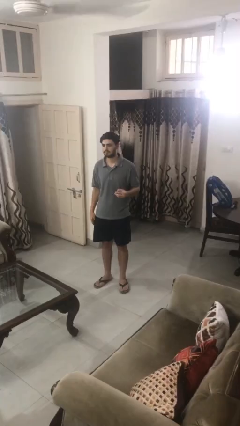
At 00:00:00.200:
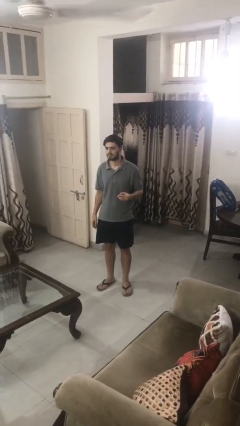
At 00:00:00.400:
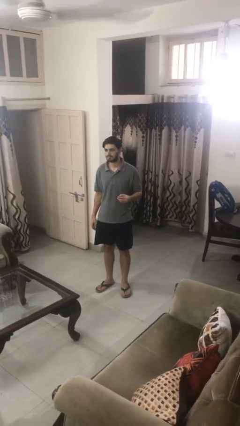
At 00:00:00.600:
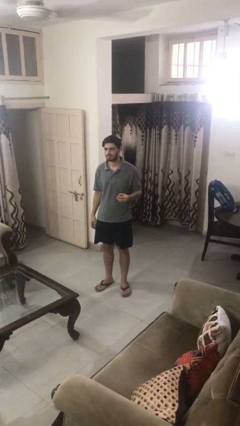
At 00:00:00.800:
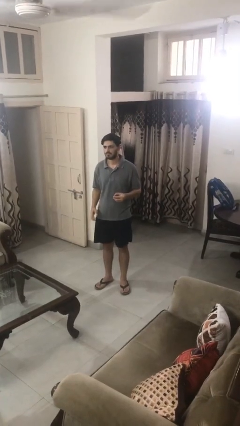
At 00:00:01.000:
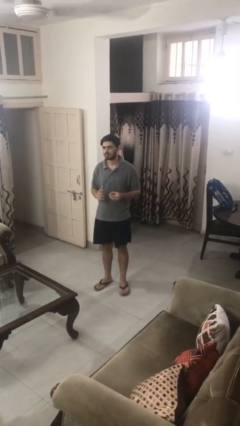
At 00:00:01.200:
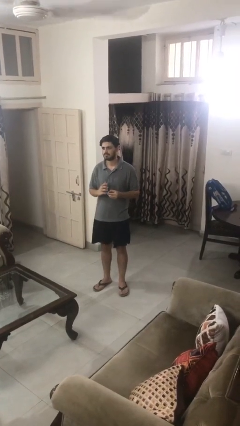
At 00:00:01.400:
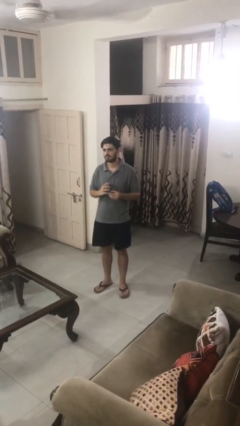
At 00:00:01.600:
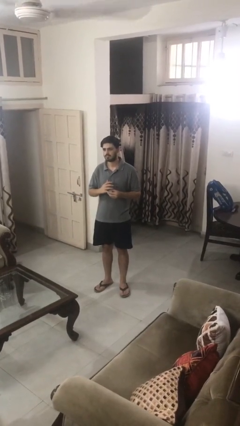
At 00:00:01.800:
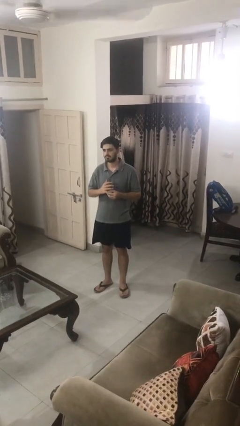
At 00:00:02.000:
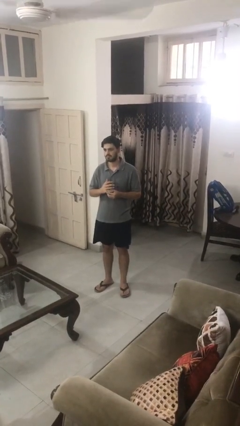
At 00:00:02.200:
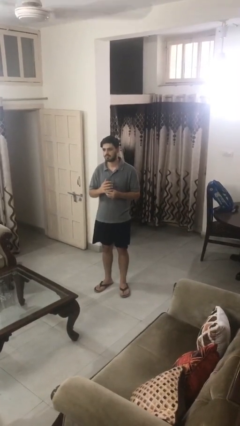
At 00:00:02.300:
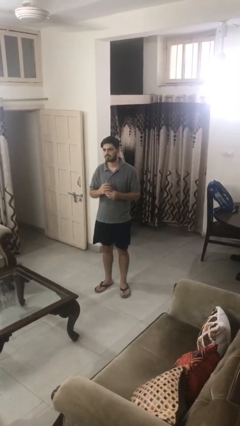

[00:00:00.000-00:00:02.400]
person puts on ring

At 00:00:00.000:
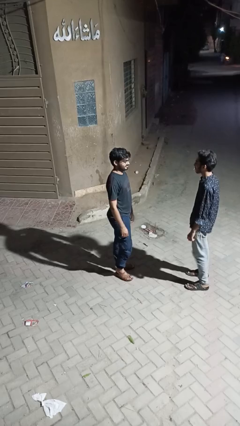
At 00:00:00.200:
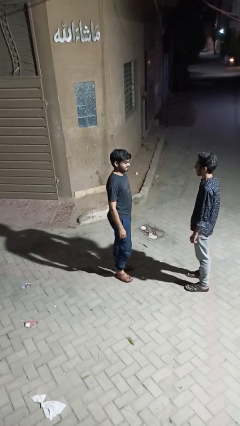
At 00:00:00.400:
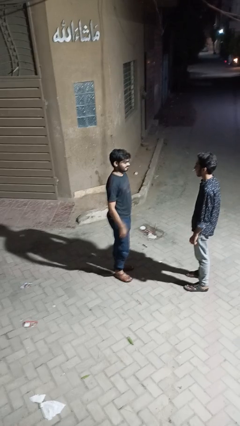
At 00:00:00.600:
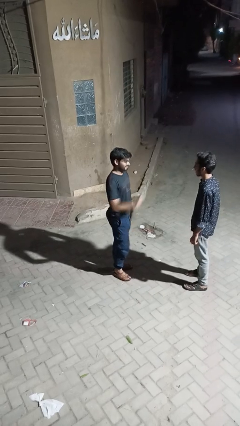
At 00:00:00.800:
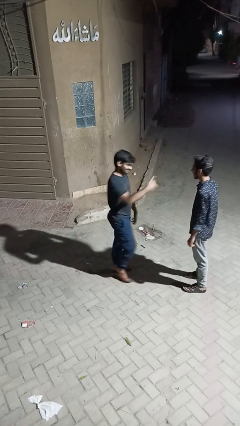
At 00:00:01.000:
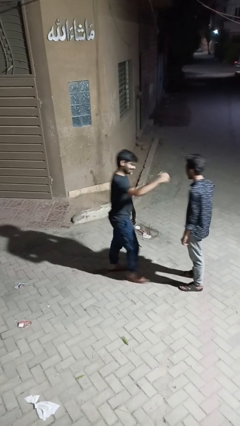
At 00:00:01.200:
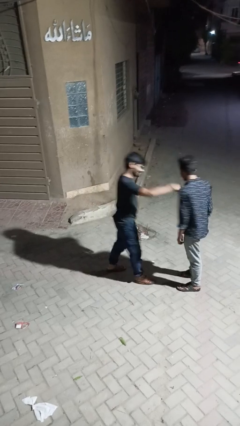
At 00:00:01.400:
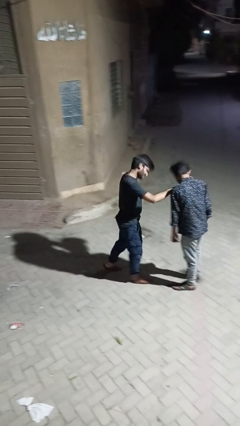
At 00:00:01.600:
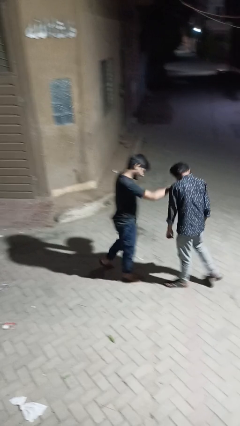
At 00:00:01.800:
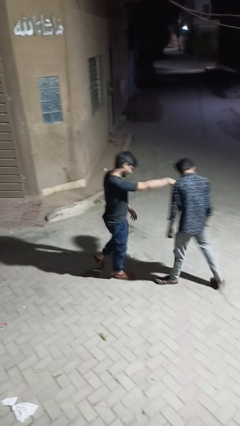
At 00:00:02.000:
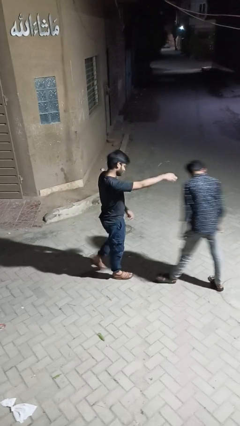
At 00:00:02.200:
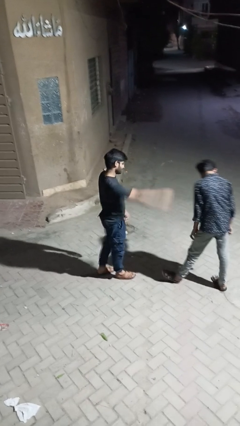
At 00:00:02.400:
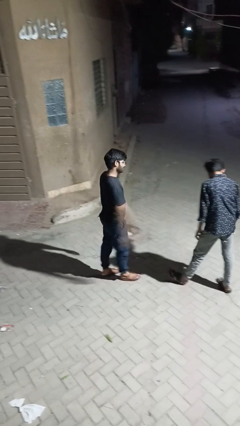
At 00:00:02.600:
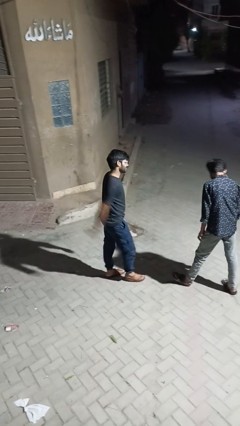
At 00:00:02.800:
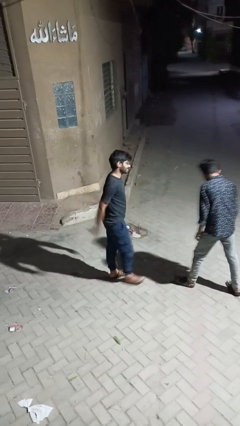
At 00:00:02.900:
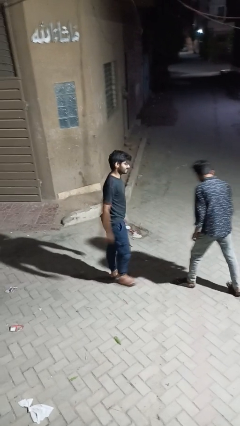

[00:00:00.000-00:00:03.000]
person shoves person

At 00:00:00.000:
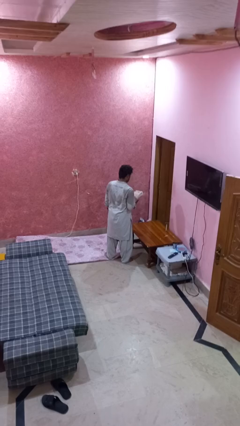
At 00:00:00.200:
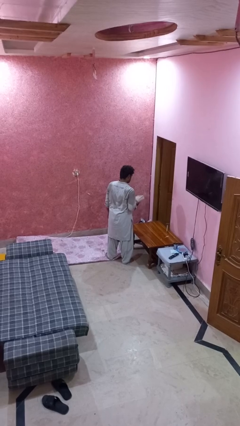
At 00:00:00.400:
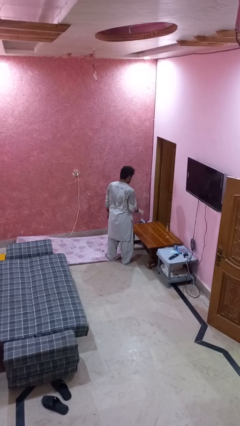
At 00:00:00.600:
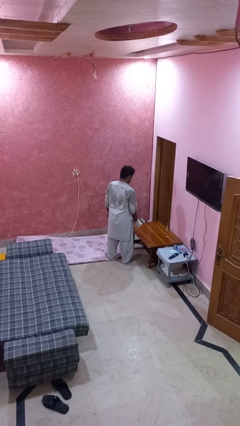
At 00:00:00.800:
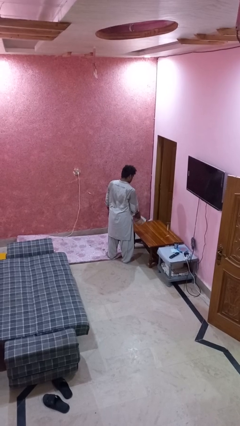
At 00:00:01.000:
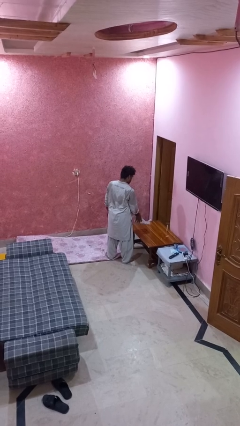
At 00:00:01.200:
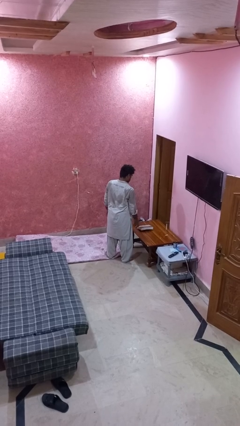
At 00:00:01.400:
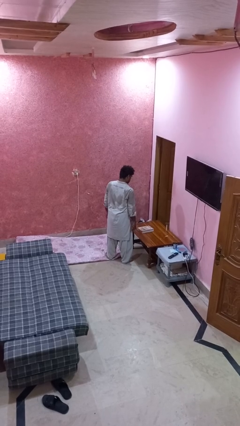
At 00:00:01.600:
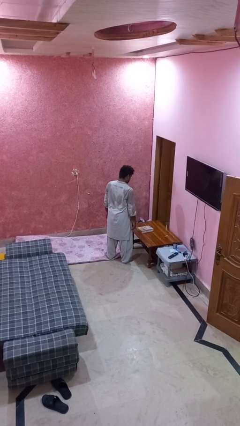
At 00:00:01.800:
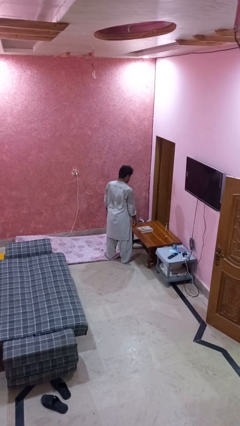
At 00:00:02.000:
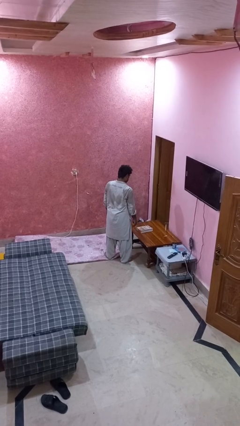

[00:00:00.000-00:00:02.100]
person throws object on table

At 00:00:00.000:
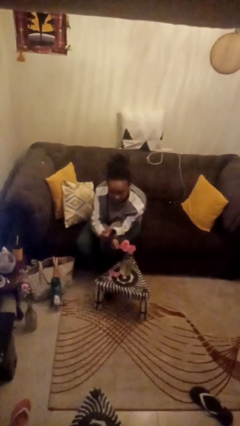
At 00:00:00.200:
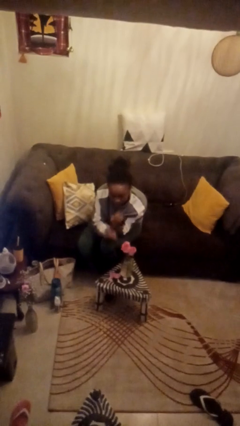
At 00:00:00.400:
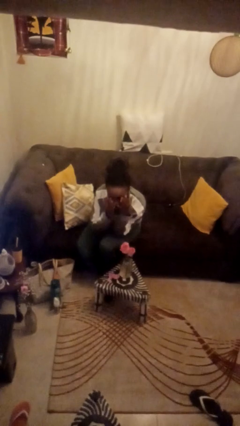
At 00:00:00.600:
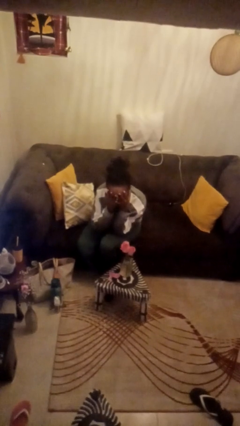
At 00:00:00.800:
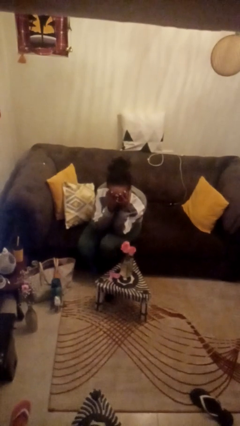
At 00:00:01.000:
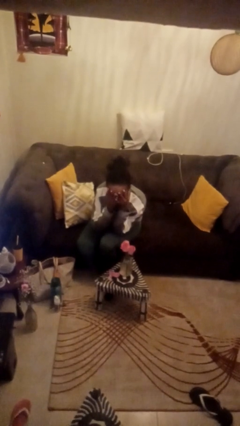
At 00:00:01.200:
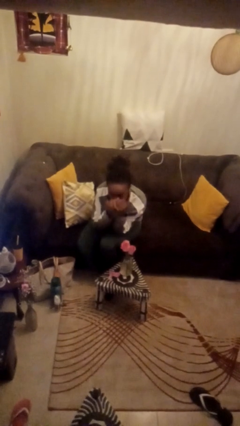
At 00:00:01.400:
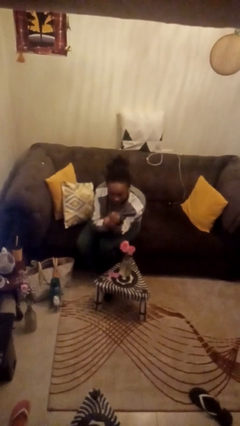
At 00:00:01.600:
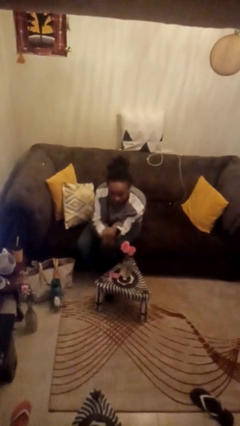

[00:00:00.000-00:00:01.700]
person covers face with hands

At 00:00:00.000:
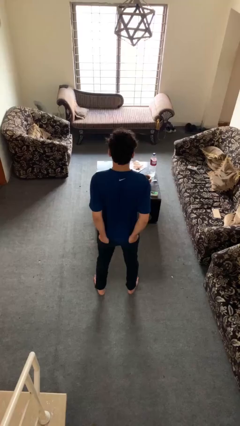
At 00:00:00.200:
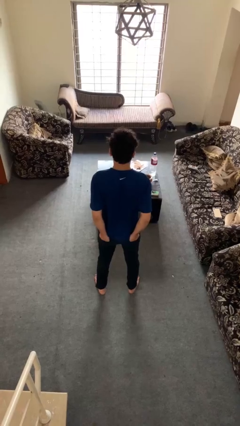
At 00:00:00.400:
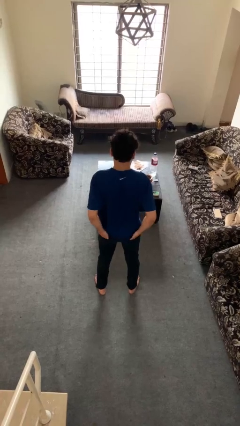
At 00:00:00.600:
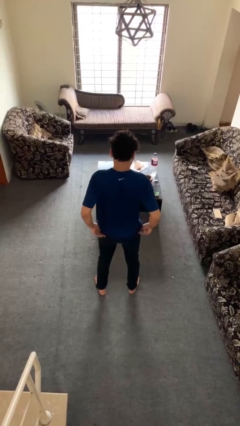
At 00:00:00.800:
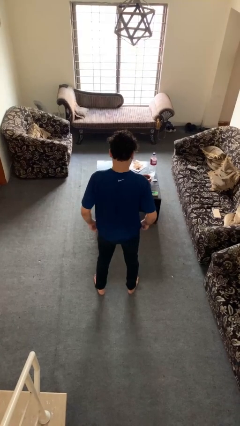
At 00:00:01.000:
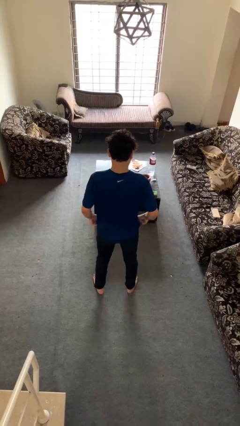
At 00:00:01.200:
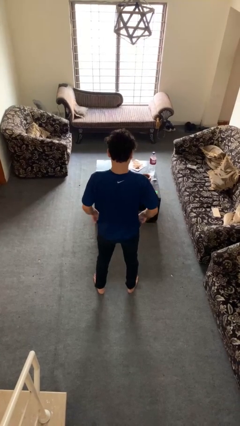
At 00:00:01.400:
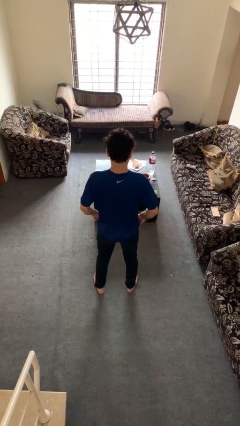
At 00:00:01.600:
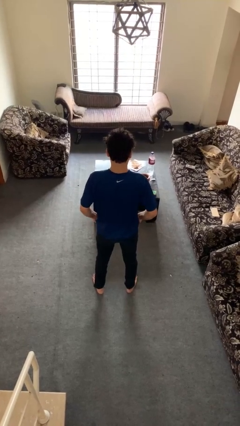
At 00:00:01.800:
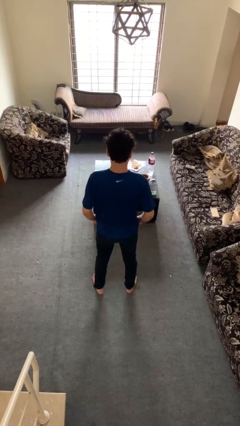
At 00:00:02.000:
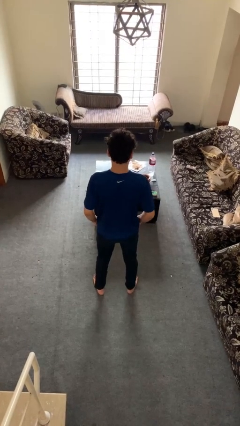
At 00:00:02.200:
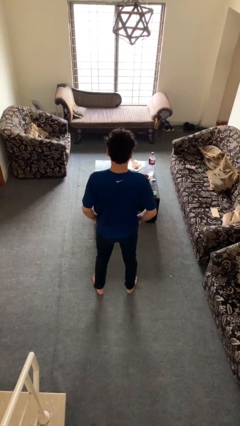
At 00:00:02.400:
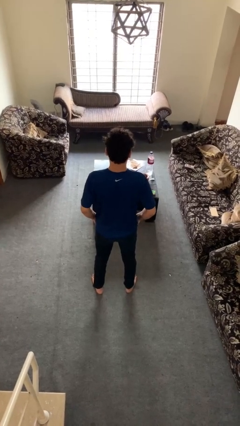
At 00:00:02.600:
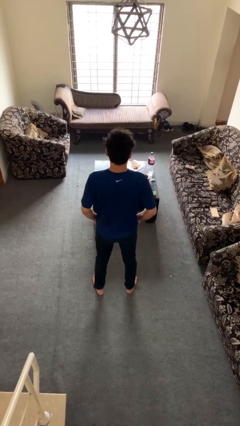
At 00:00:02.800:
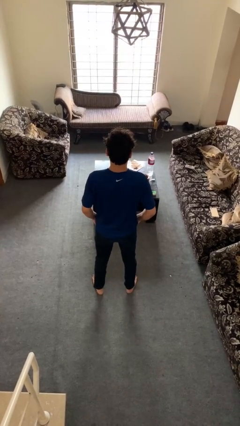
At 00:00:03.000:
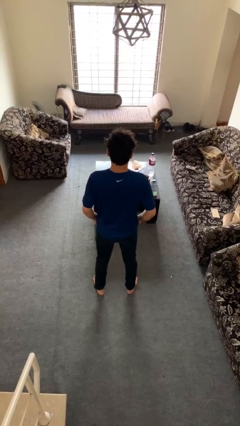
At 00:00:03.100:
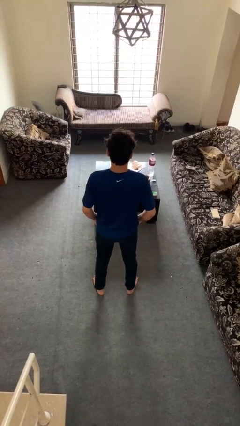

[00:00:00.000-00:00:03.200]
person puts hands in back pockets

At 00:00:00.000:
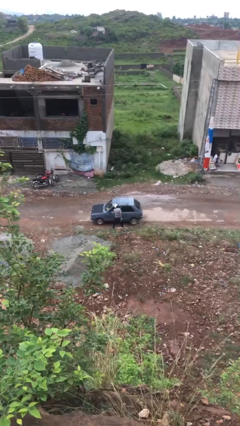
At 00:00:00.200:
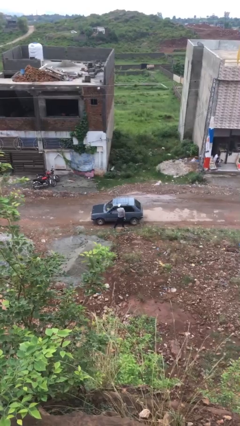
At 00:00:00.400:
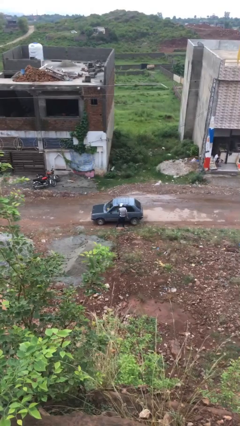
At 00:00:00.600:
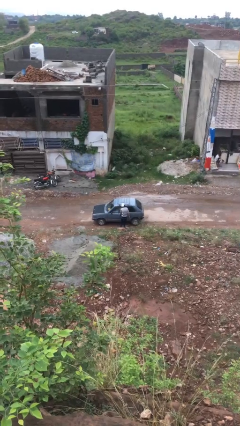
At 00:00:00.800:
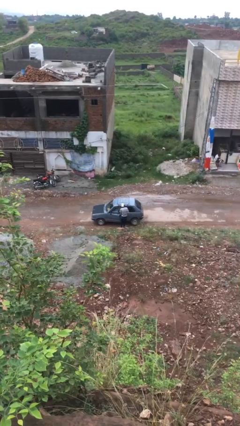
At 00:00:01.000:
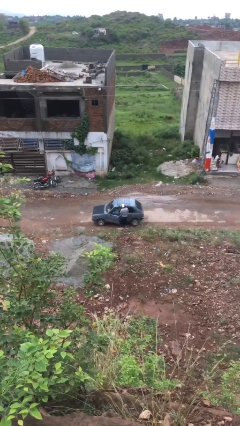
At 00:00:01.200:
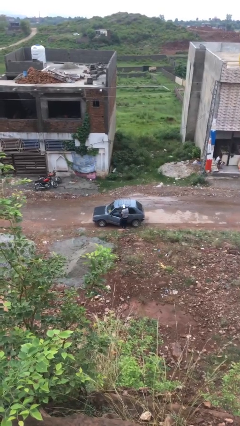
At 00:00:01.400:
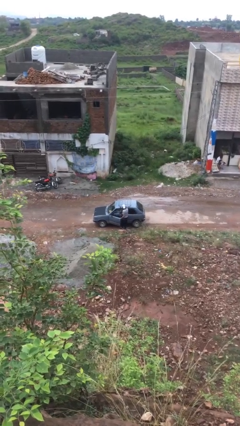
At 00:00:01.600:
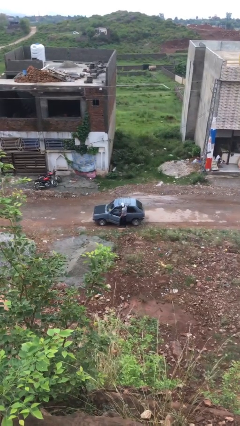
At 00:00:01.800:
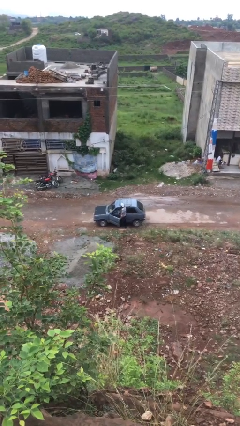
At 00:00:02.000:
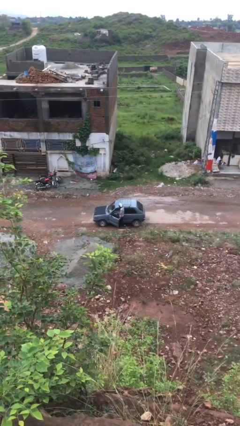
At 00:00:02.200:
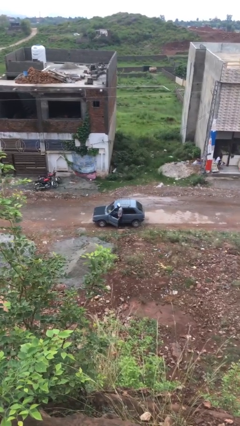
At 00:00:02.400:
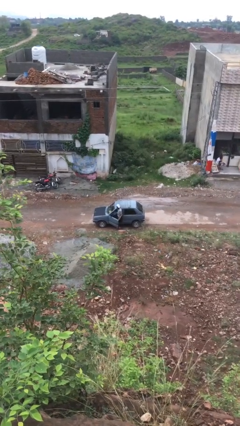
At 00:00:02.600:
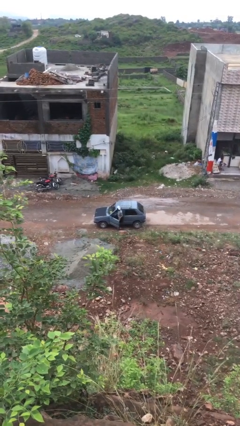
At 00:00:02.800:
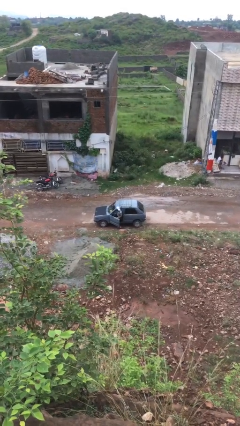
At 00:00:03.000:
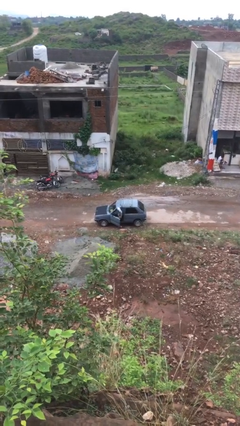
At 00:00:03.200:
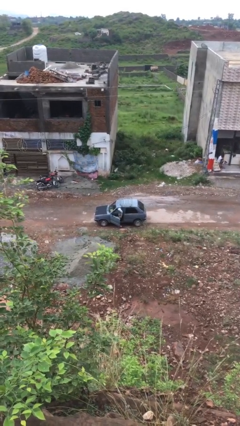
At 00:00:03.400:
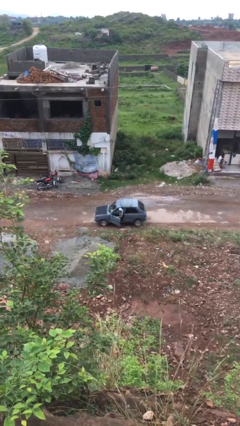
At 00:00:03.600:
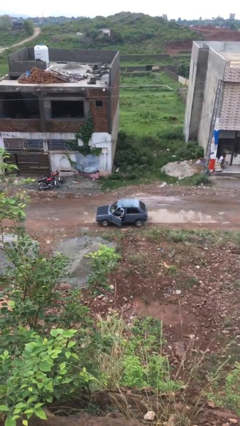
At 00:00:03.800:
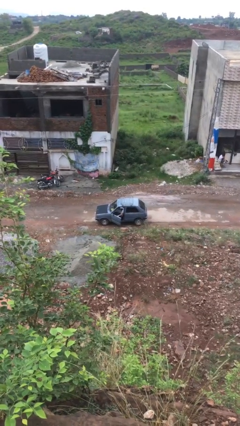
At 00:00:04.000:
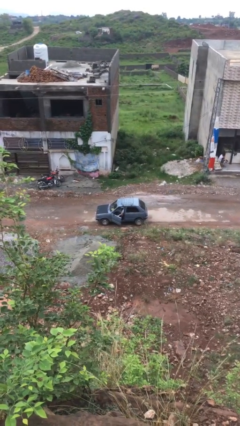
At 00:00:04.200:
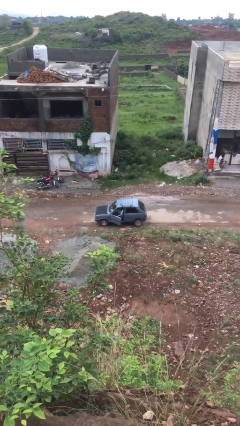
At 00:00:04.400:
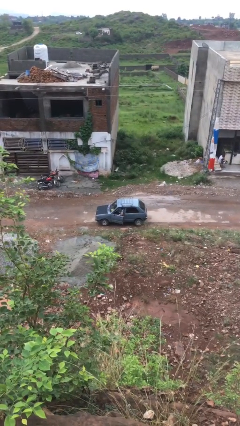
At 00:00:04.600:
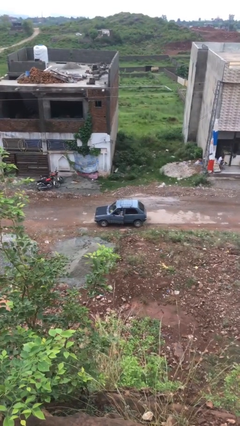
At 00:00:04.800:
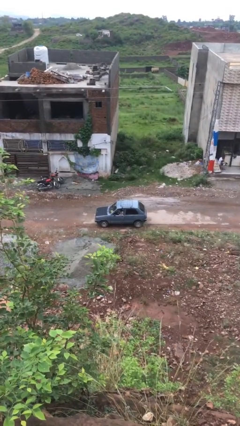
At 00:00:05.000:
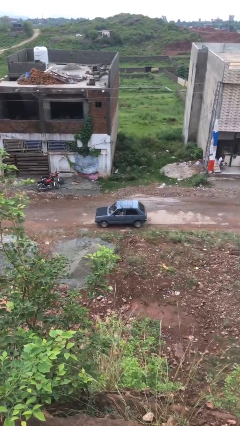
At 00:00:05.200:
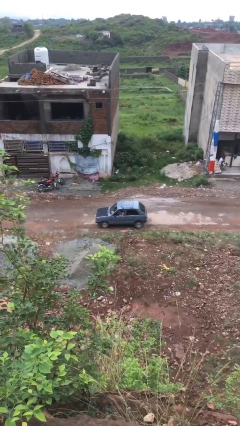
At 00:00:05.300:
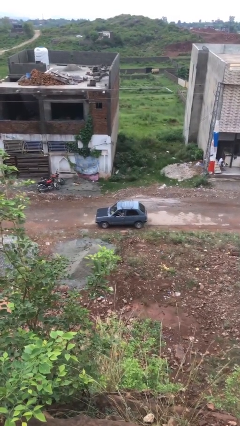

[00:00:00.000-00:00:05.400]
car picks up person
